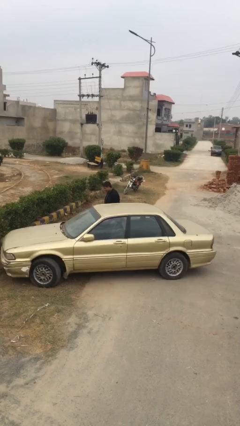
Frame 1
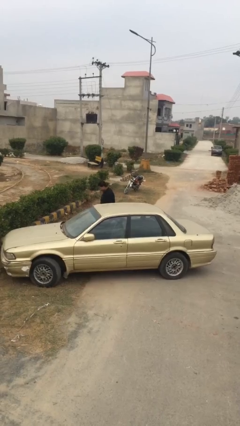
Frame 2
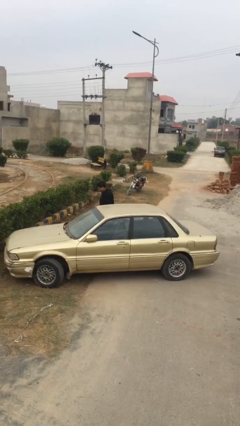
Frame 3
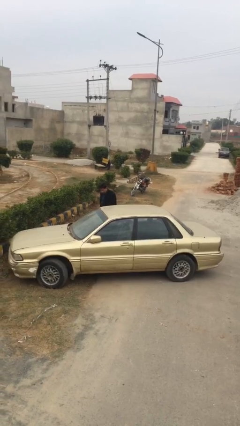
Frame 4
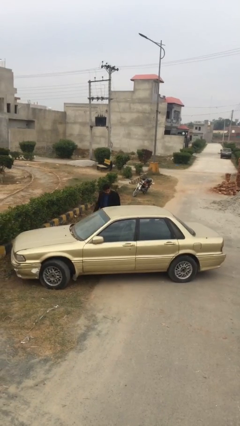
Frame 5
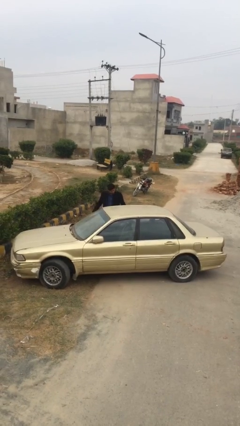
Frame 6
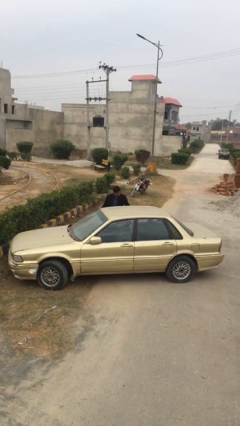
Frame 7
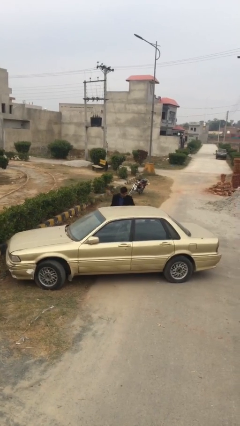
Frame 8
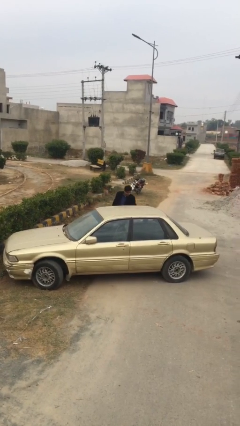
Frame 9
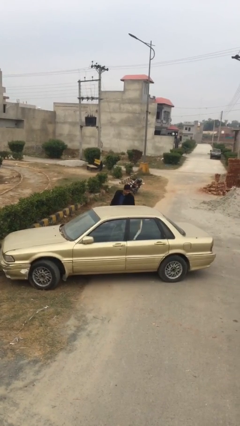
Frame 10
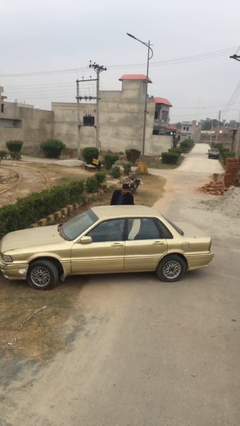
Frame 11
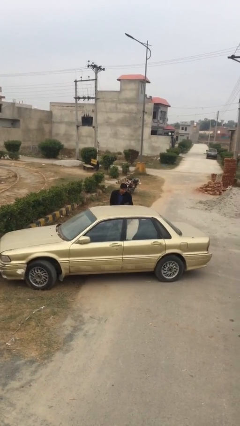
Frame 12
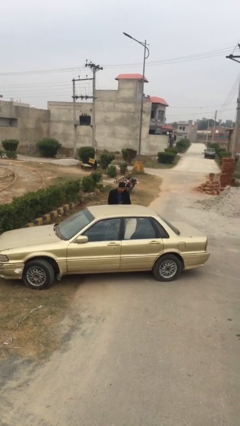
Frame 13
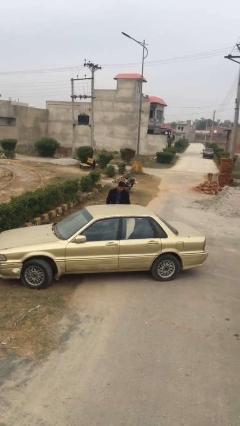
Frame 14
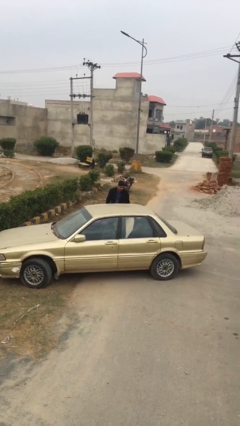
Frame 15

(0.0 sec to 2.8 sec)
person opens car door

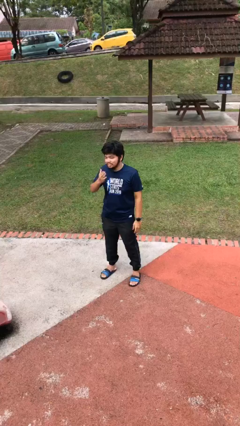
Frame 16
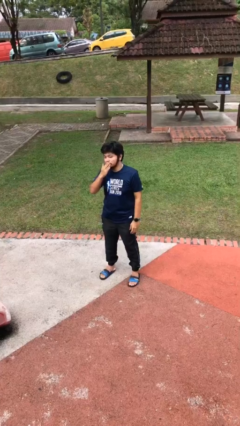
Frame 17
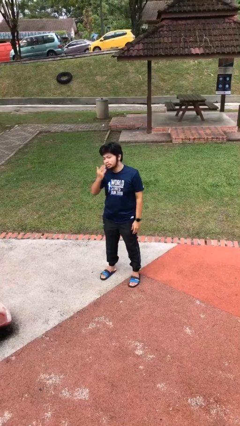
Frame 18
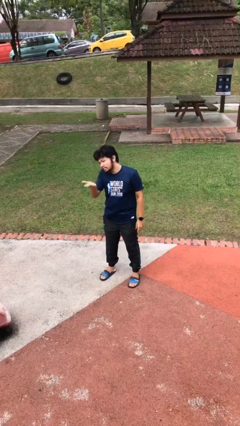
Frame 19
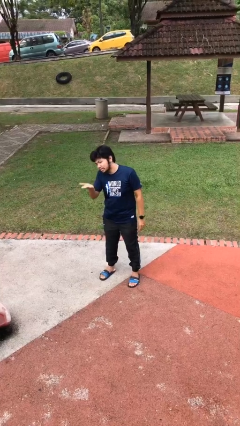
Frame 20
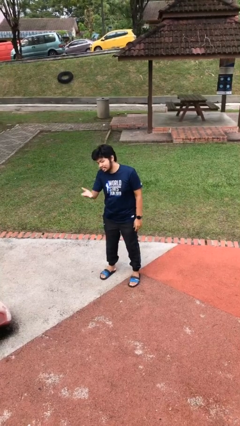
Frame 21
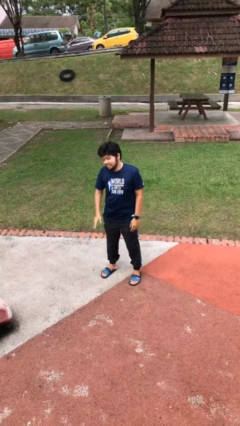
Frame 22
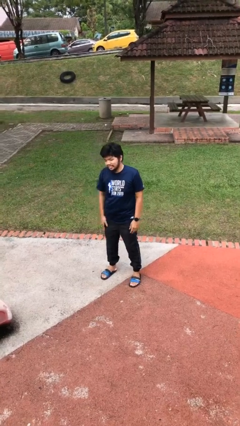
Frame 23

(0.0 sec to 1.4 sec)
person gestures blow kiss

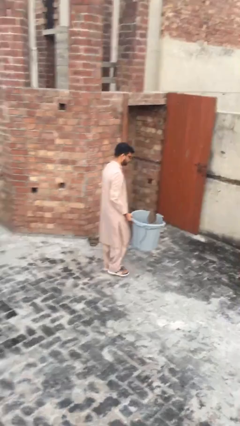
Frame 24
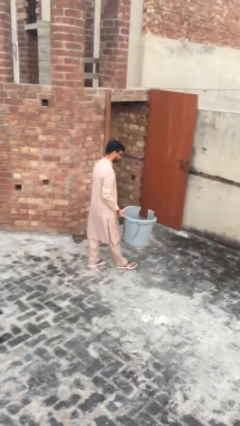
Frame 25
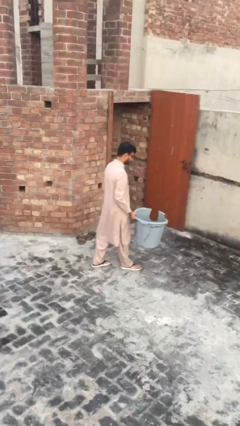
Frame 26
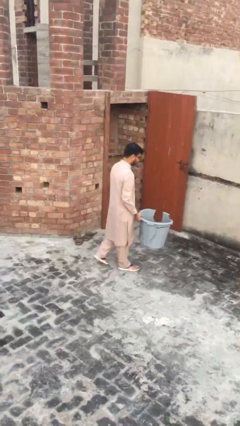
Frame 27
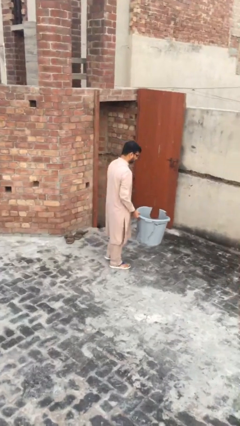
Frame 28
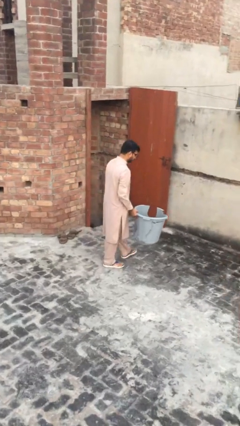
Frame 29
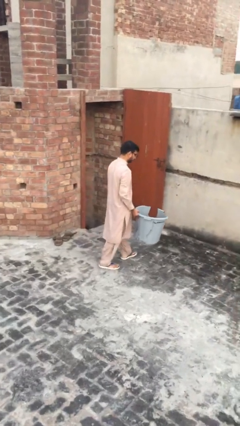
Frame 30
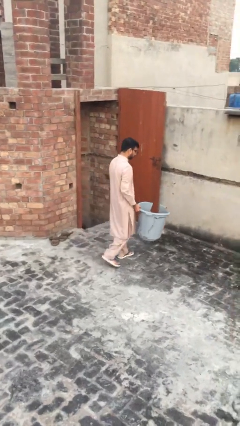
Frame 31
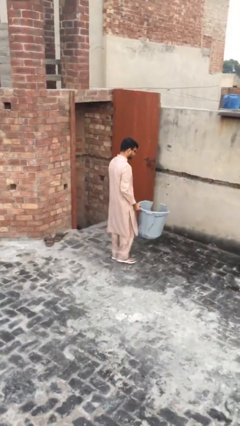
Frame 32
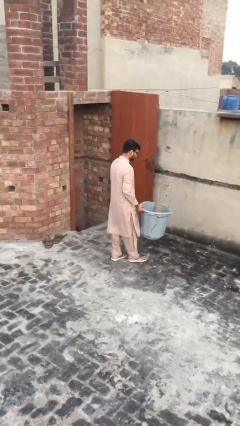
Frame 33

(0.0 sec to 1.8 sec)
person steals object from person

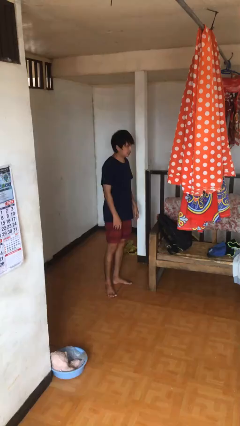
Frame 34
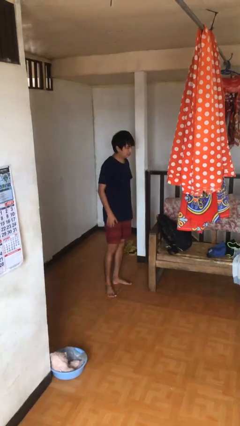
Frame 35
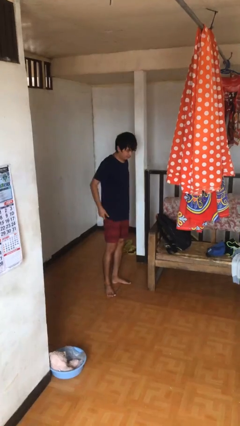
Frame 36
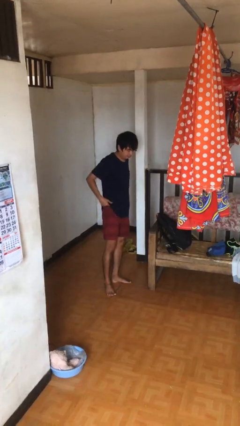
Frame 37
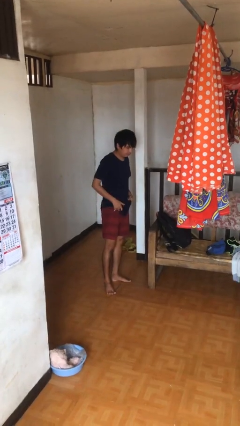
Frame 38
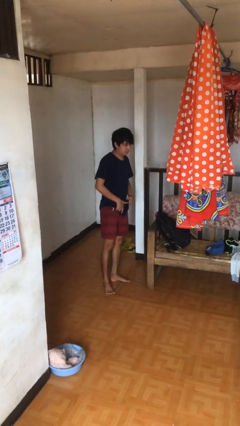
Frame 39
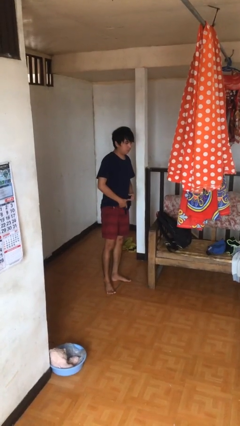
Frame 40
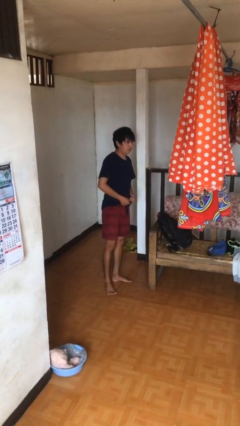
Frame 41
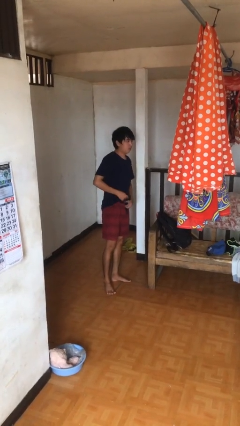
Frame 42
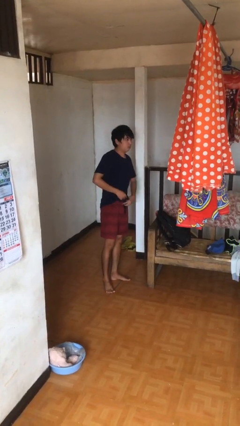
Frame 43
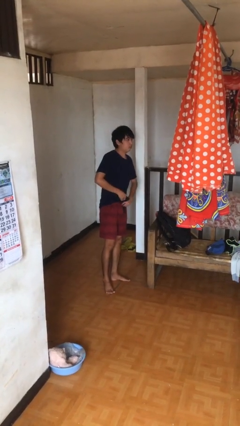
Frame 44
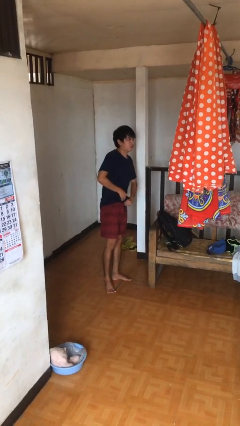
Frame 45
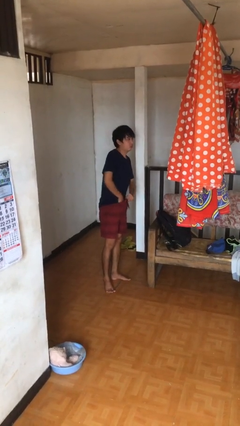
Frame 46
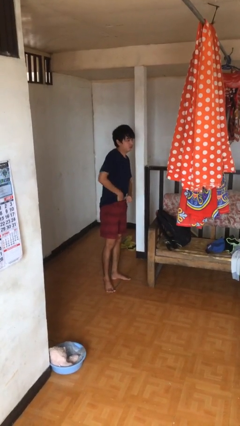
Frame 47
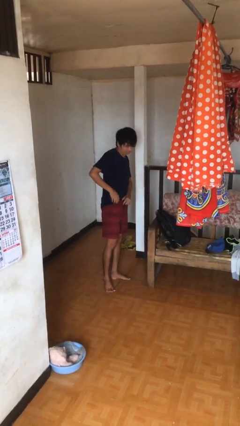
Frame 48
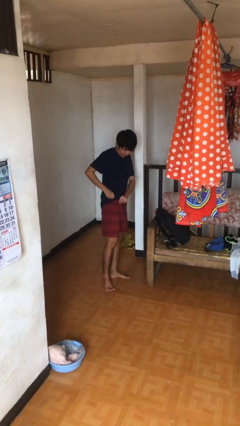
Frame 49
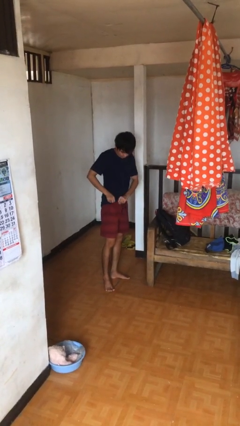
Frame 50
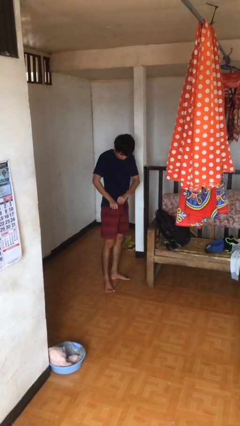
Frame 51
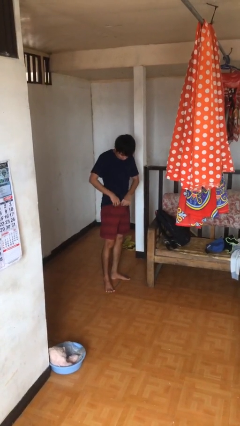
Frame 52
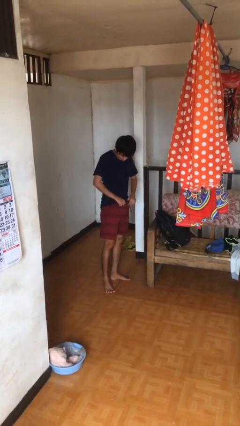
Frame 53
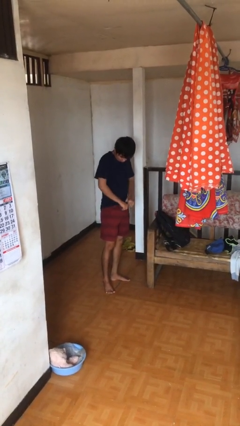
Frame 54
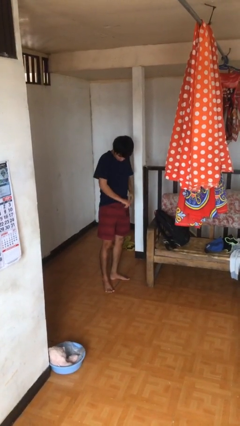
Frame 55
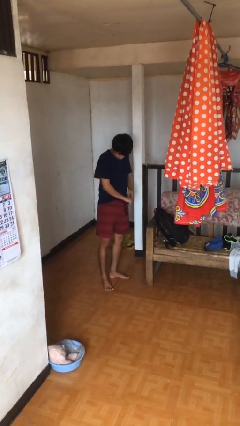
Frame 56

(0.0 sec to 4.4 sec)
person tucks in shirt

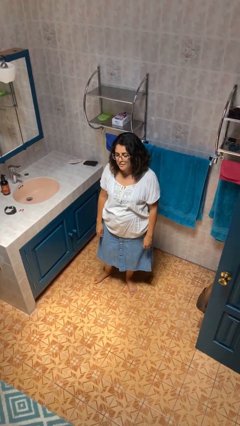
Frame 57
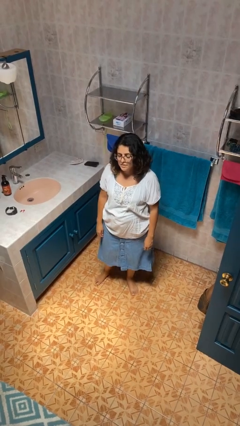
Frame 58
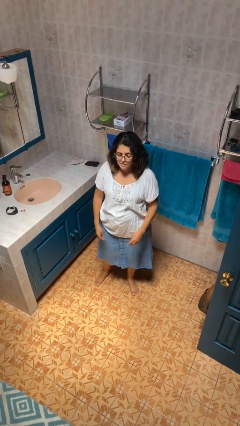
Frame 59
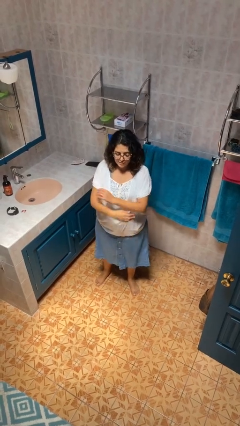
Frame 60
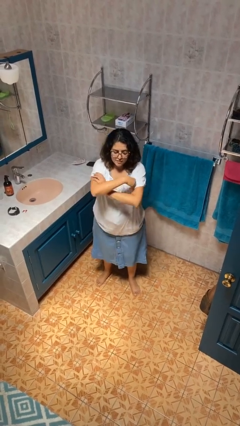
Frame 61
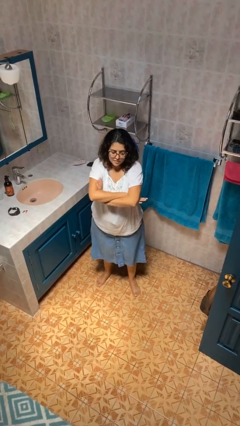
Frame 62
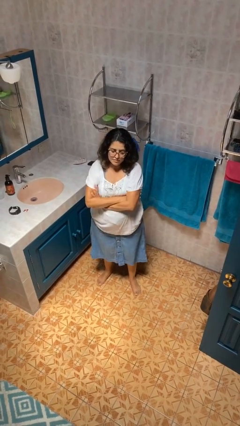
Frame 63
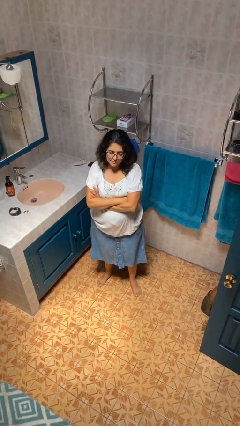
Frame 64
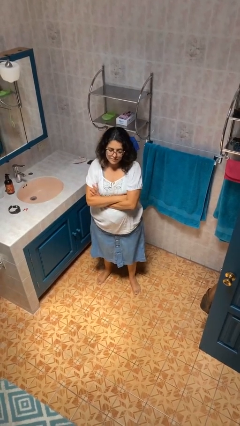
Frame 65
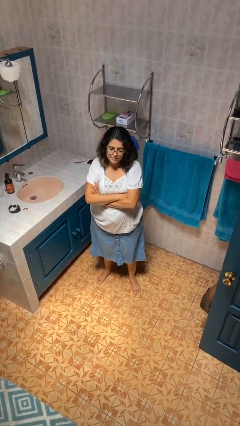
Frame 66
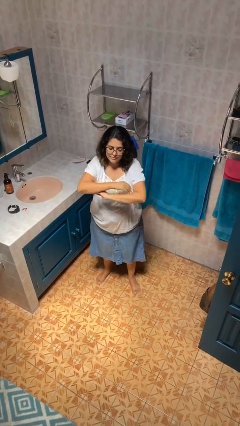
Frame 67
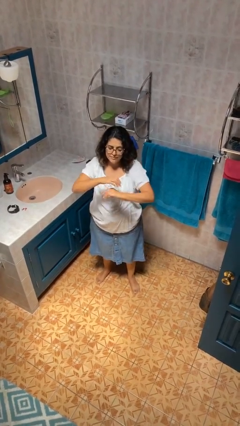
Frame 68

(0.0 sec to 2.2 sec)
person crosses arms

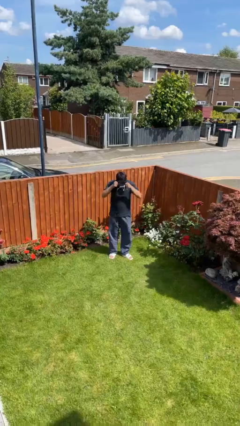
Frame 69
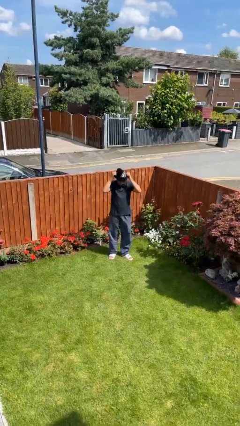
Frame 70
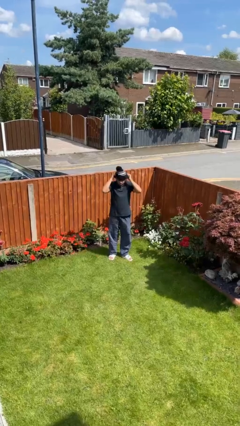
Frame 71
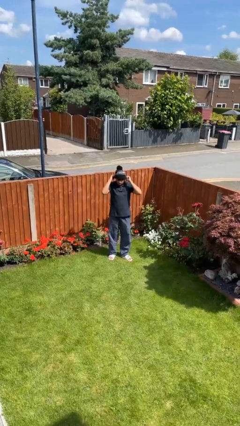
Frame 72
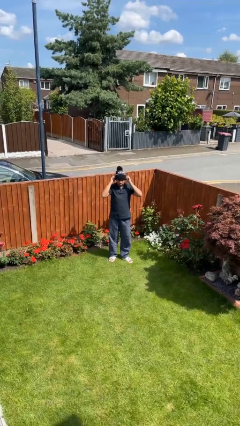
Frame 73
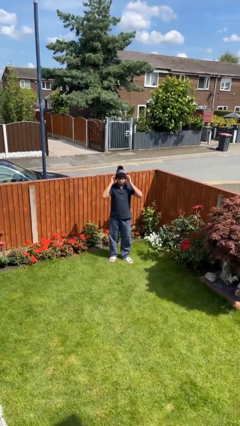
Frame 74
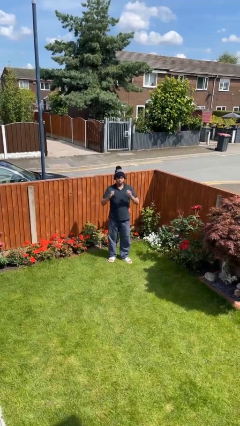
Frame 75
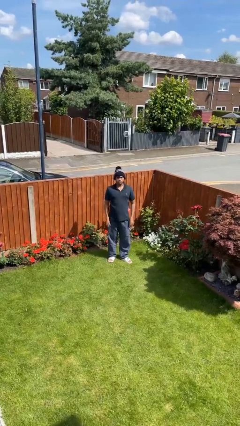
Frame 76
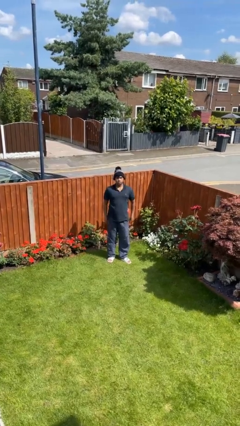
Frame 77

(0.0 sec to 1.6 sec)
person puts on hat

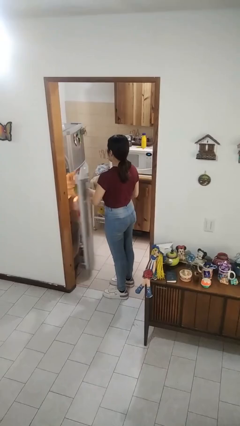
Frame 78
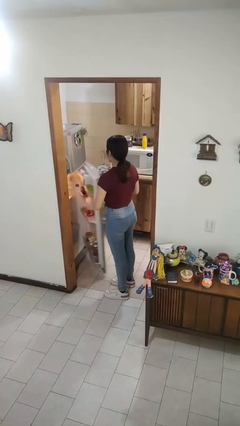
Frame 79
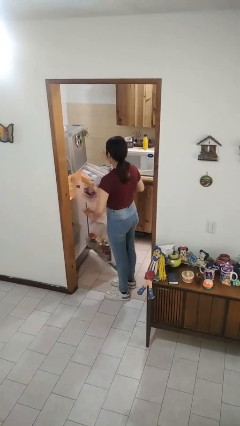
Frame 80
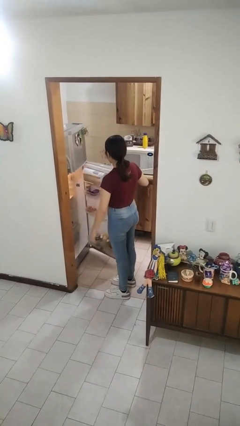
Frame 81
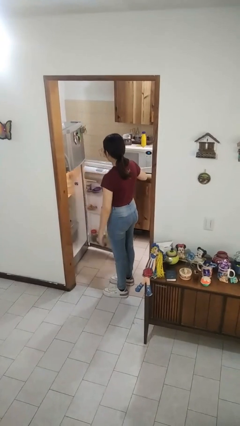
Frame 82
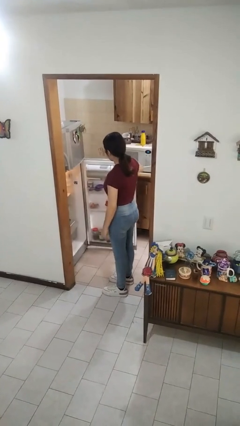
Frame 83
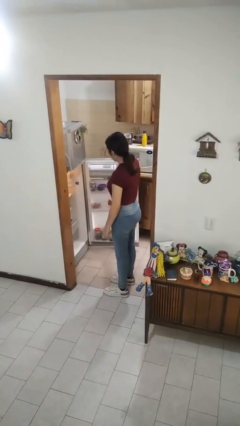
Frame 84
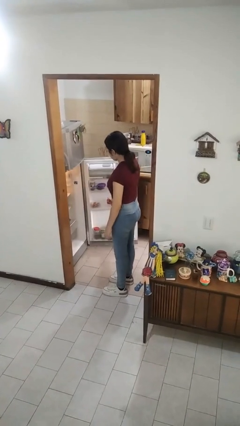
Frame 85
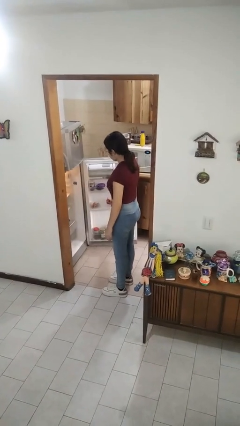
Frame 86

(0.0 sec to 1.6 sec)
person opens refrigerator

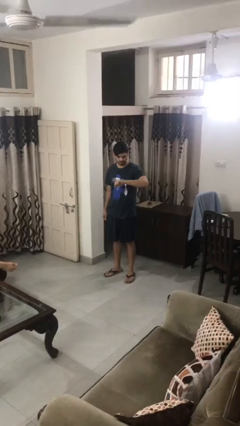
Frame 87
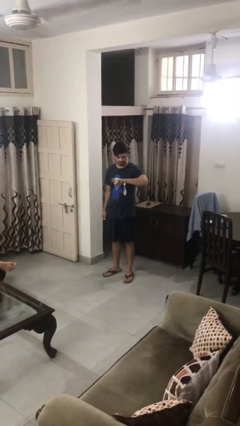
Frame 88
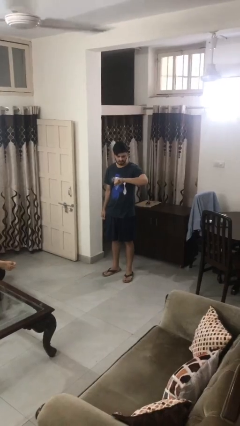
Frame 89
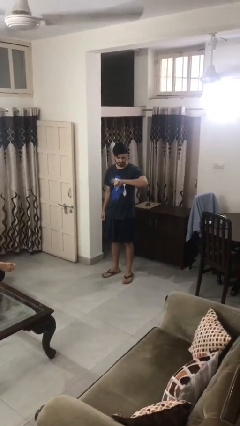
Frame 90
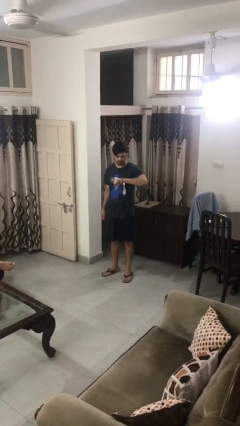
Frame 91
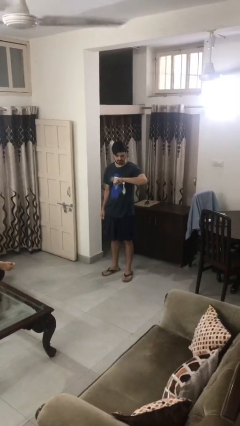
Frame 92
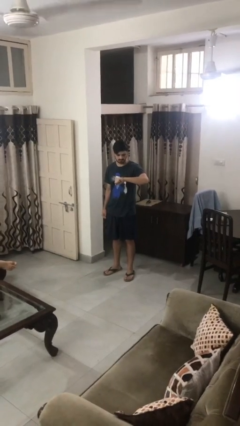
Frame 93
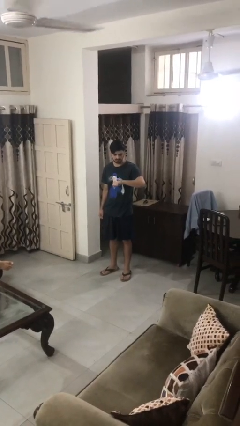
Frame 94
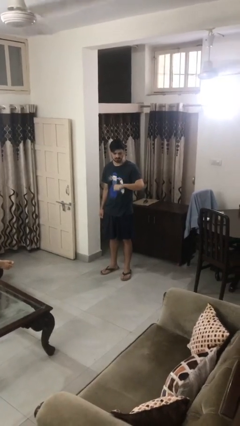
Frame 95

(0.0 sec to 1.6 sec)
person looks at wristwatch
